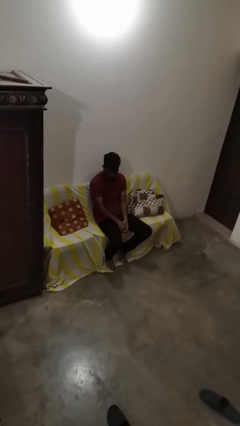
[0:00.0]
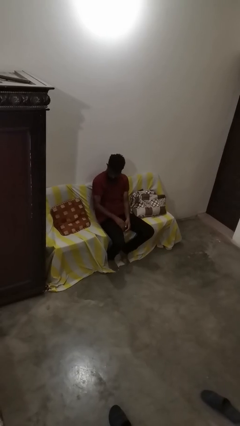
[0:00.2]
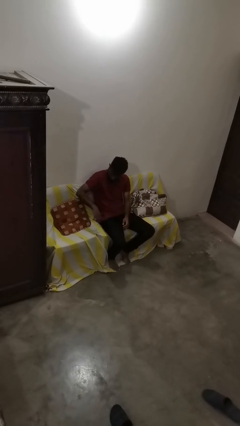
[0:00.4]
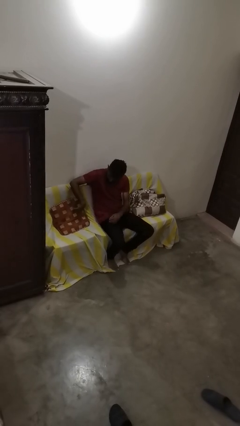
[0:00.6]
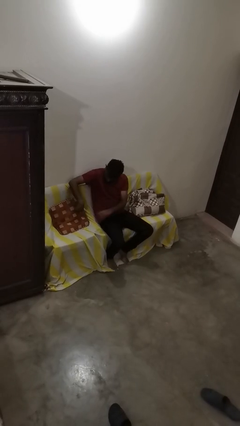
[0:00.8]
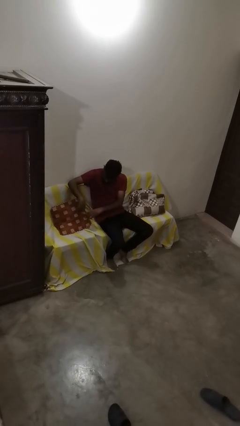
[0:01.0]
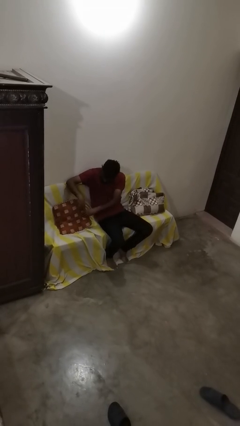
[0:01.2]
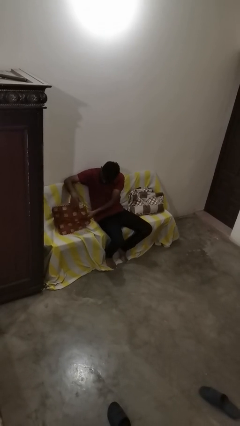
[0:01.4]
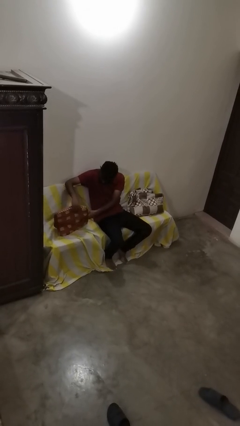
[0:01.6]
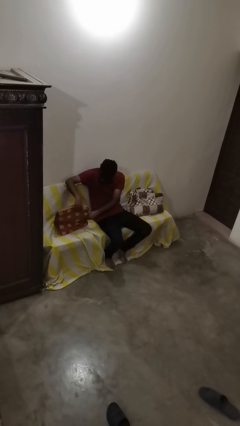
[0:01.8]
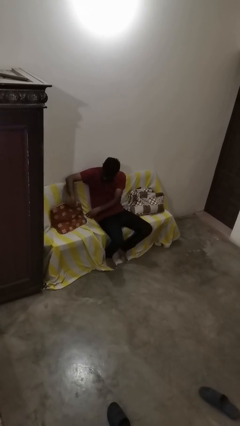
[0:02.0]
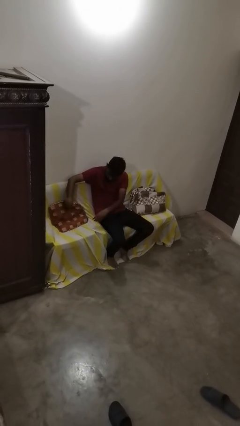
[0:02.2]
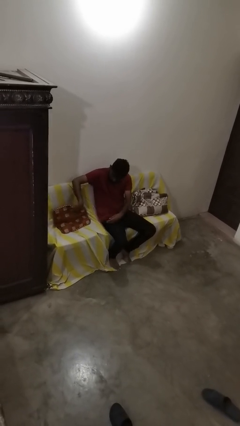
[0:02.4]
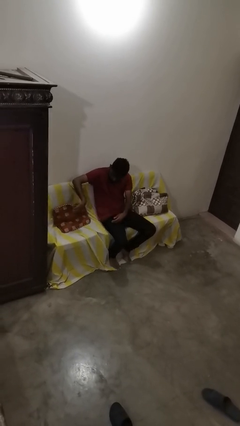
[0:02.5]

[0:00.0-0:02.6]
person searches in couch

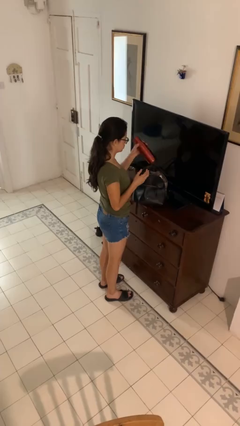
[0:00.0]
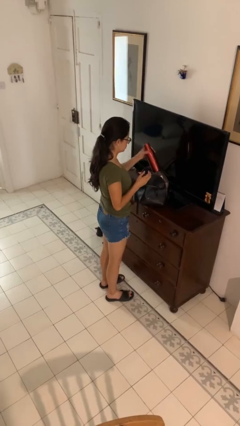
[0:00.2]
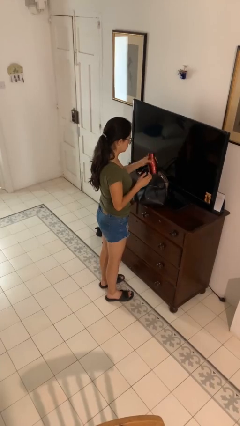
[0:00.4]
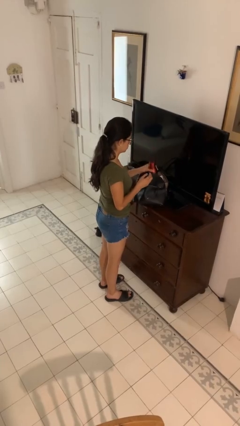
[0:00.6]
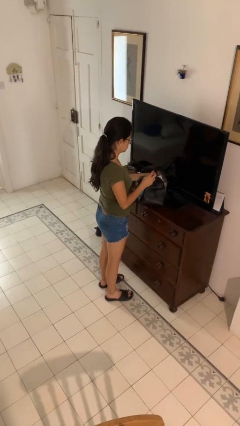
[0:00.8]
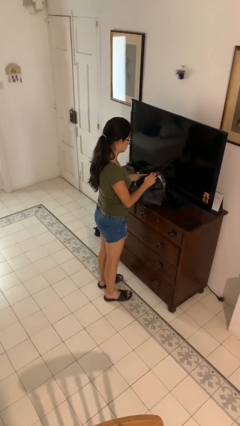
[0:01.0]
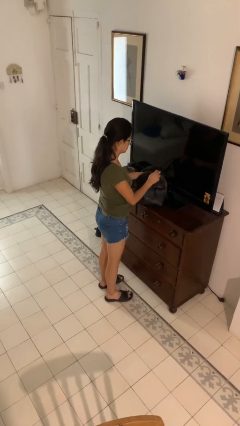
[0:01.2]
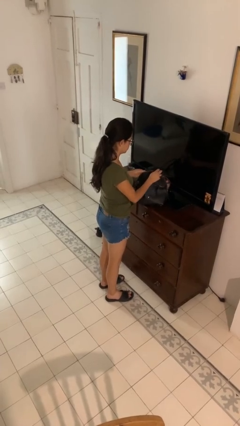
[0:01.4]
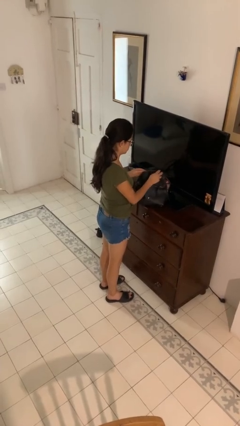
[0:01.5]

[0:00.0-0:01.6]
person puts object into purse

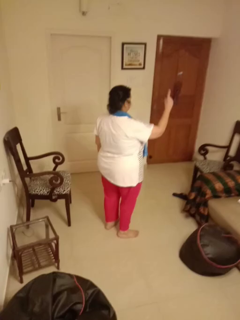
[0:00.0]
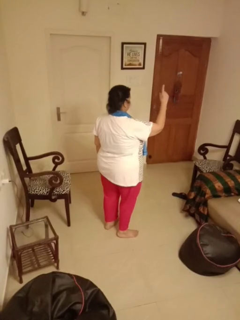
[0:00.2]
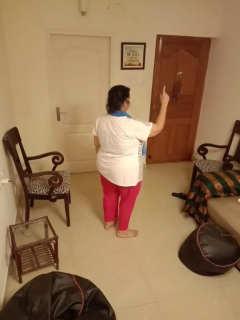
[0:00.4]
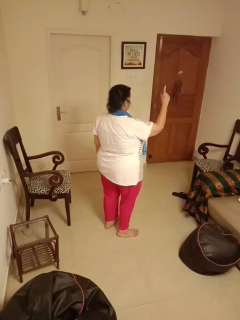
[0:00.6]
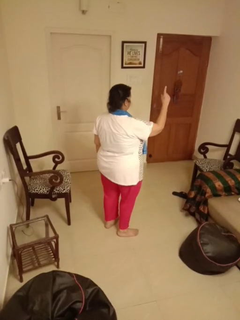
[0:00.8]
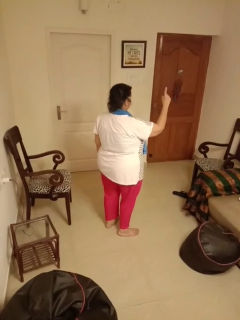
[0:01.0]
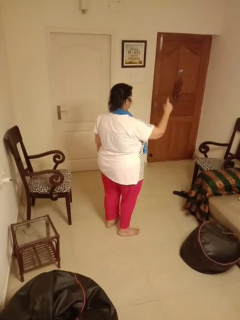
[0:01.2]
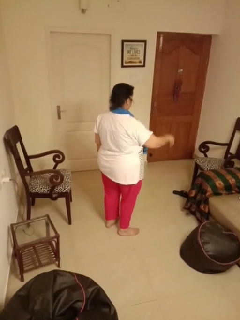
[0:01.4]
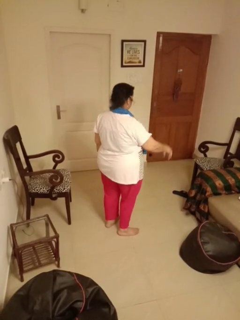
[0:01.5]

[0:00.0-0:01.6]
person gestures number one

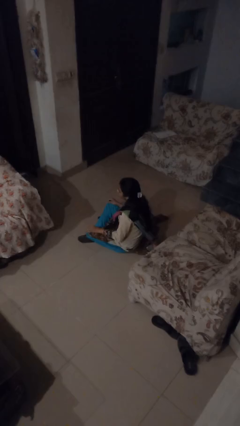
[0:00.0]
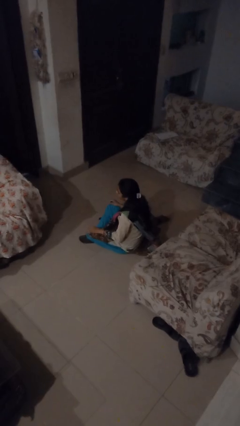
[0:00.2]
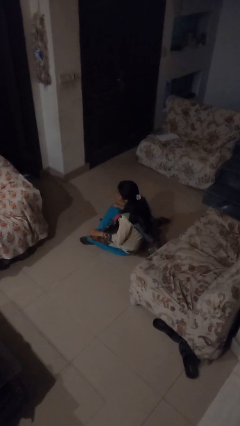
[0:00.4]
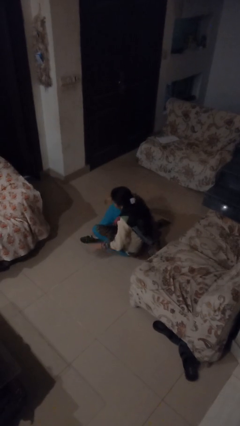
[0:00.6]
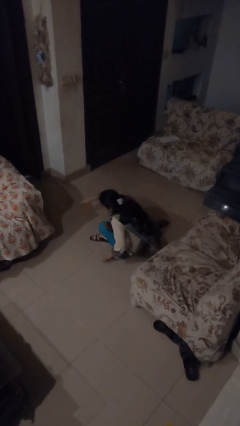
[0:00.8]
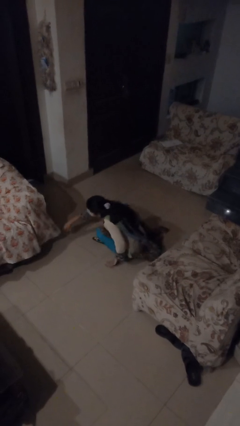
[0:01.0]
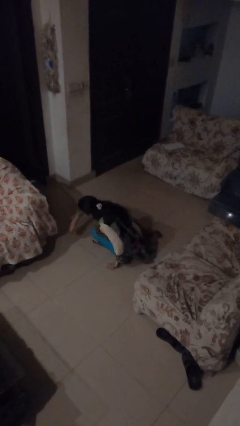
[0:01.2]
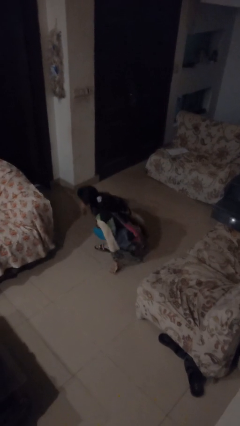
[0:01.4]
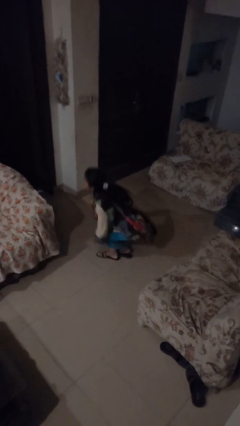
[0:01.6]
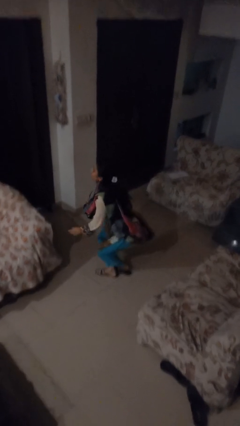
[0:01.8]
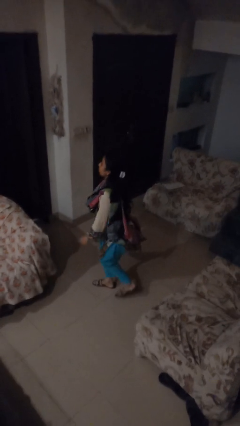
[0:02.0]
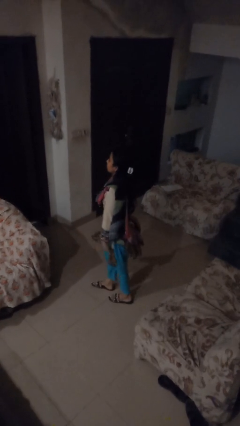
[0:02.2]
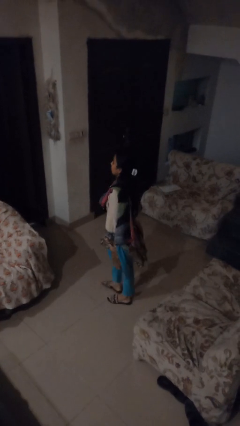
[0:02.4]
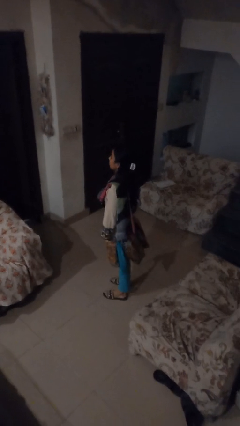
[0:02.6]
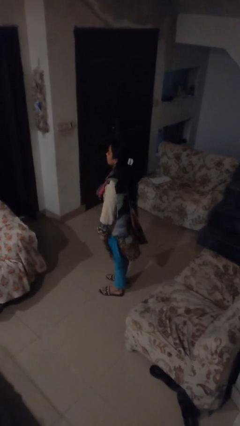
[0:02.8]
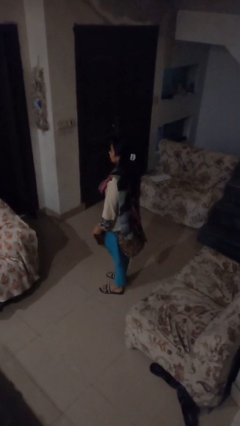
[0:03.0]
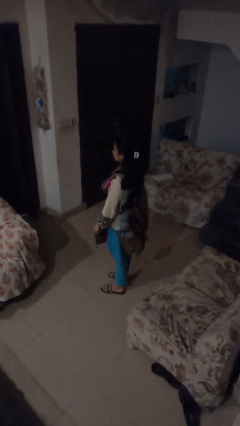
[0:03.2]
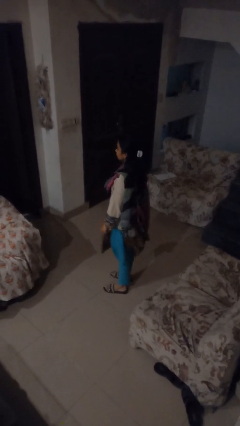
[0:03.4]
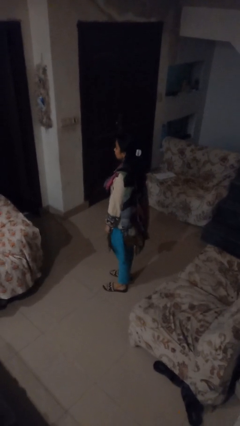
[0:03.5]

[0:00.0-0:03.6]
person stands up from floor

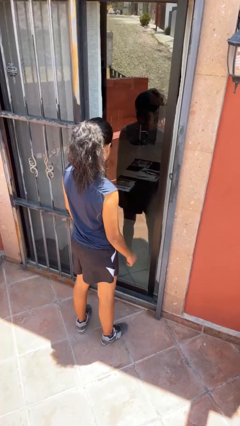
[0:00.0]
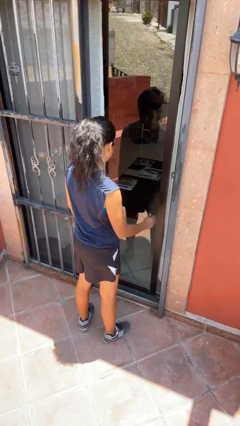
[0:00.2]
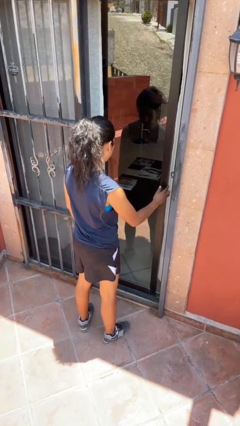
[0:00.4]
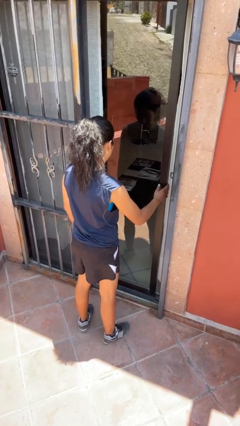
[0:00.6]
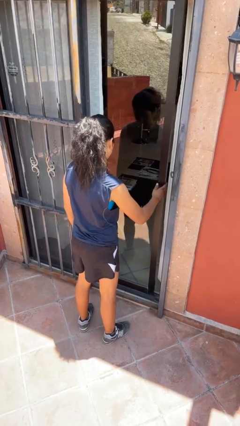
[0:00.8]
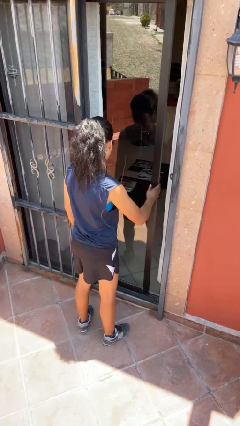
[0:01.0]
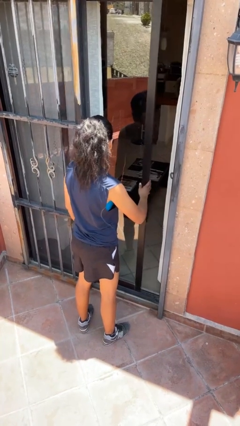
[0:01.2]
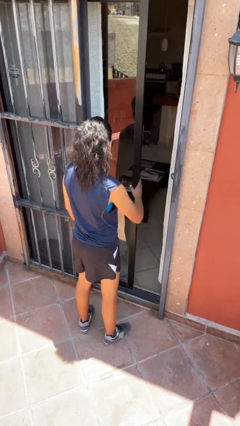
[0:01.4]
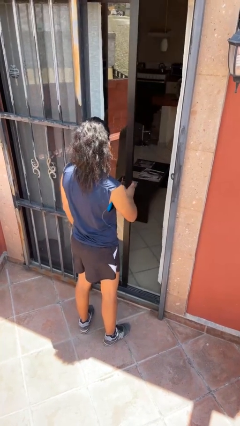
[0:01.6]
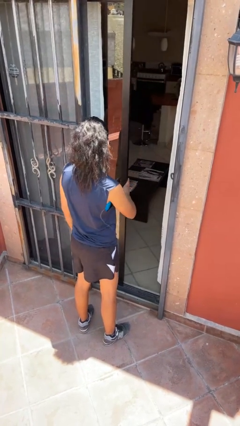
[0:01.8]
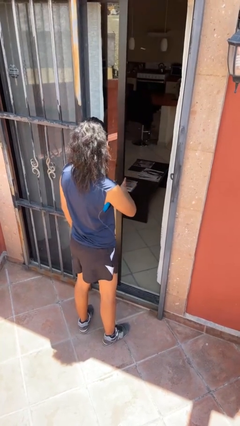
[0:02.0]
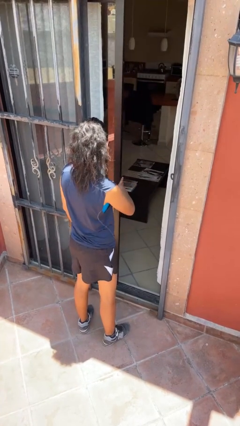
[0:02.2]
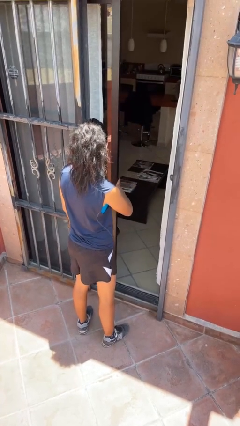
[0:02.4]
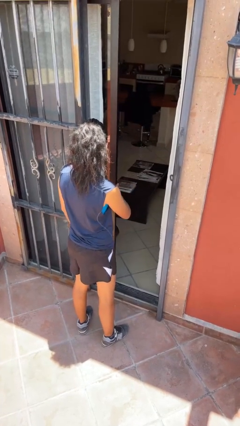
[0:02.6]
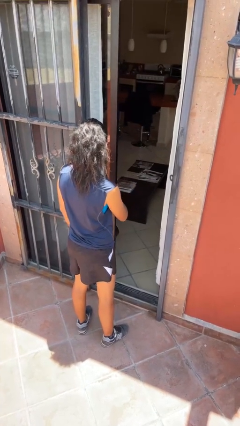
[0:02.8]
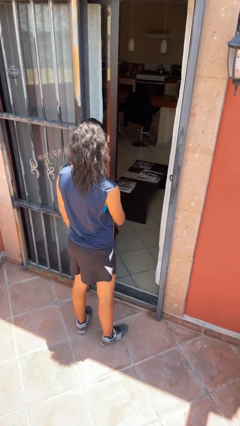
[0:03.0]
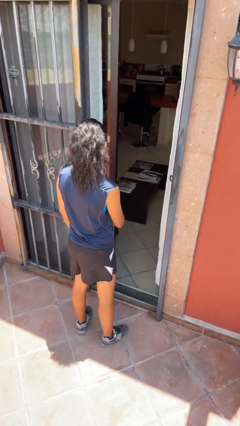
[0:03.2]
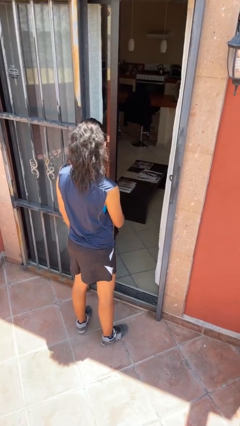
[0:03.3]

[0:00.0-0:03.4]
person opens sliding door

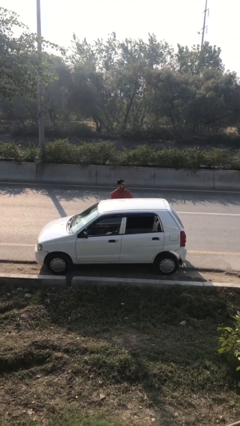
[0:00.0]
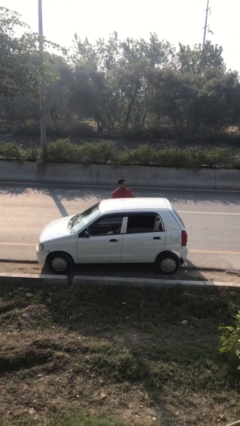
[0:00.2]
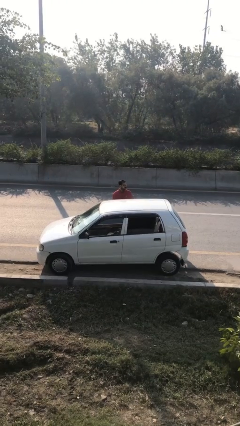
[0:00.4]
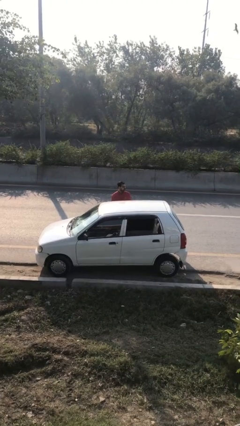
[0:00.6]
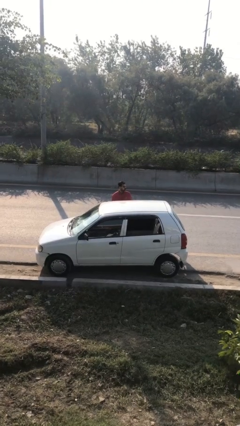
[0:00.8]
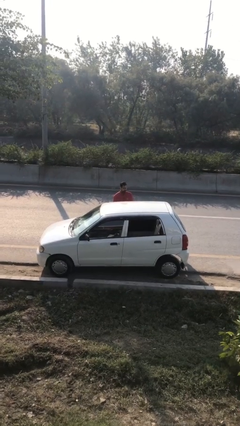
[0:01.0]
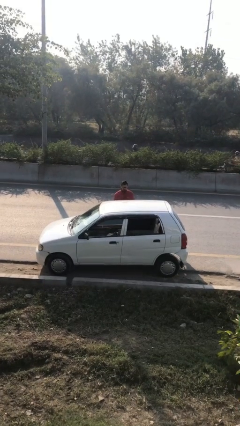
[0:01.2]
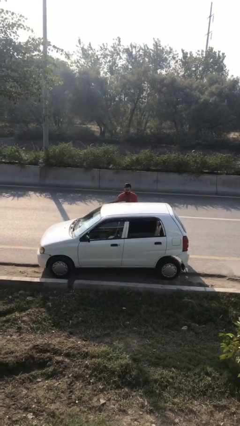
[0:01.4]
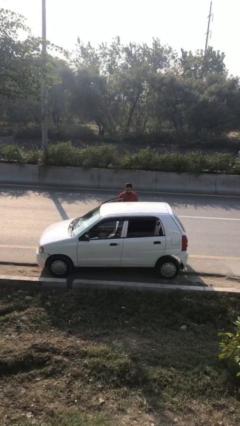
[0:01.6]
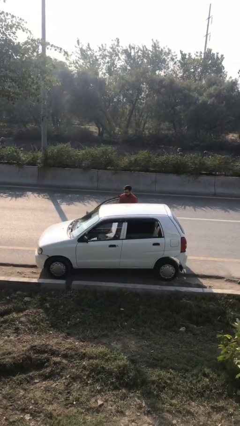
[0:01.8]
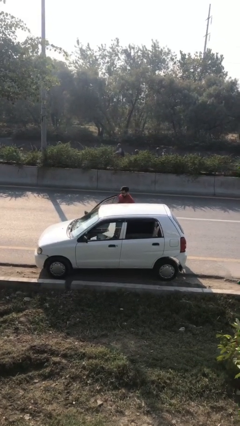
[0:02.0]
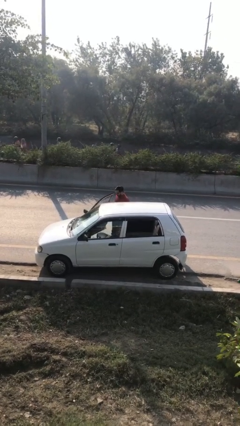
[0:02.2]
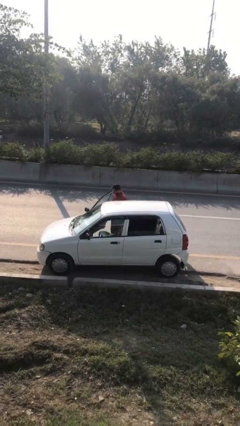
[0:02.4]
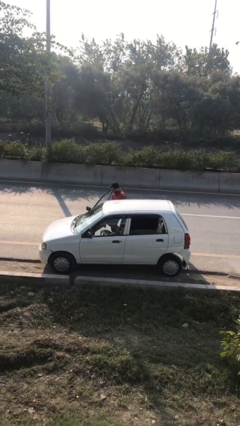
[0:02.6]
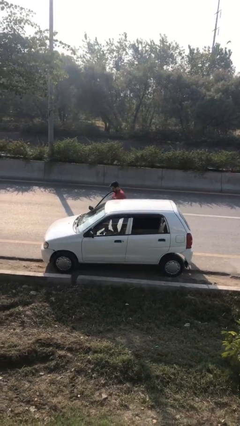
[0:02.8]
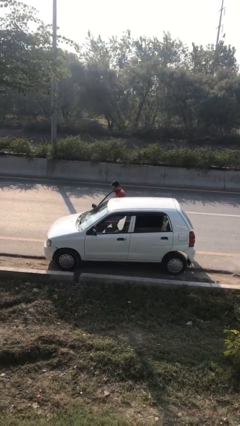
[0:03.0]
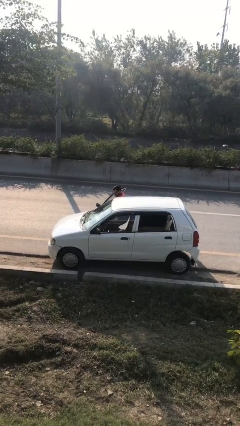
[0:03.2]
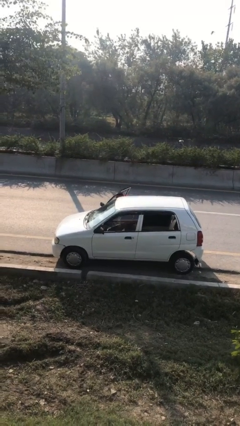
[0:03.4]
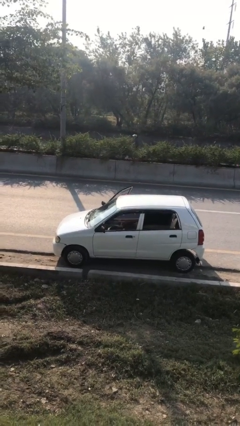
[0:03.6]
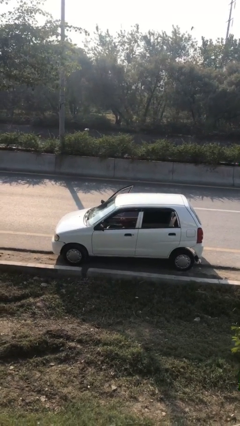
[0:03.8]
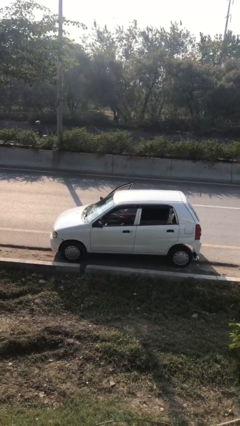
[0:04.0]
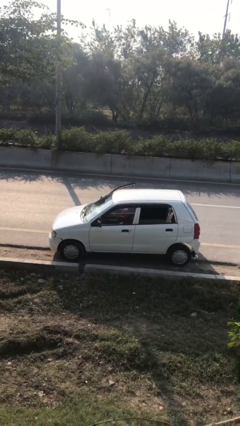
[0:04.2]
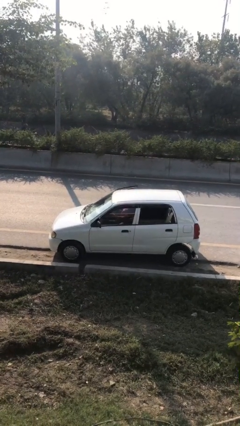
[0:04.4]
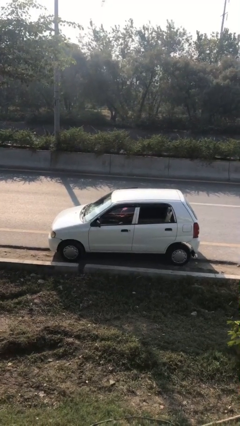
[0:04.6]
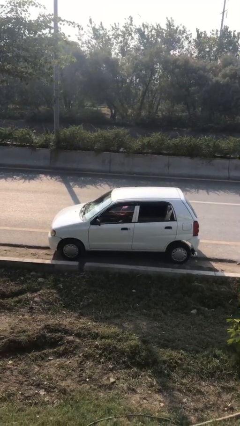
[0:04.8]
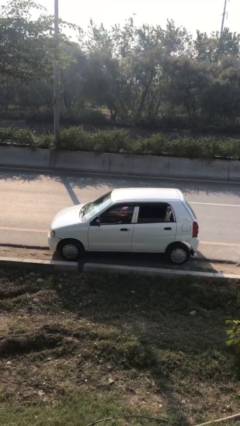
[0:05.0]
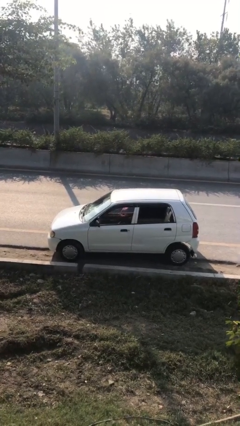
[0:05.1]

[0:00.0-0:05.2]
person enters car
